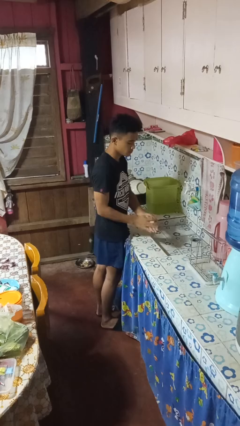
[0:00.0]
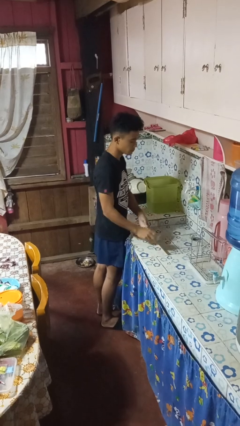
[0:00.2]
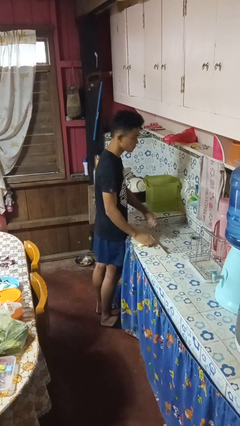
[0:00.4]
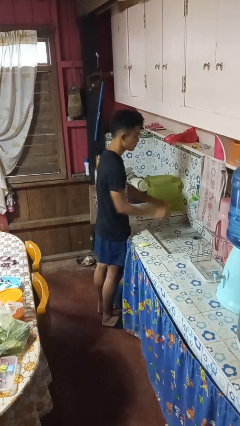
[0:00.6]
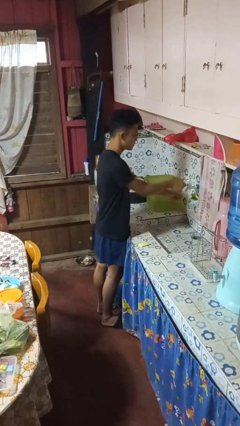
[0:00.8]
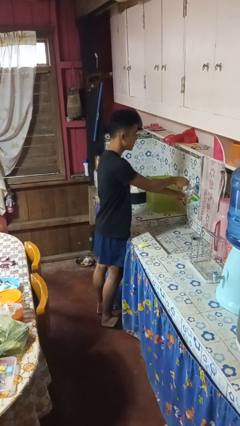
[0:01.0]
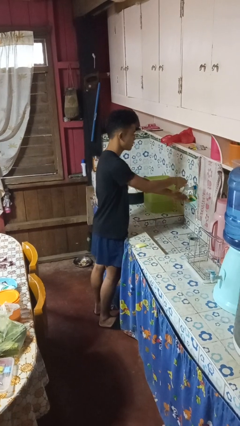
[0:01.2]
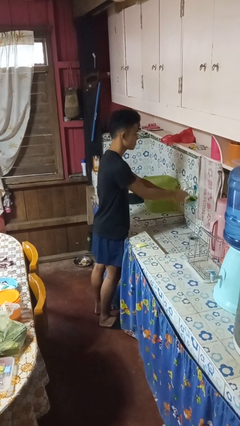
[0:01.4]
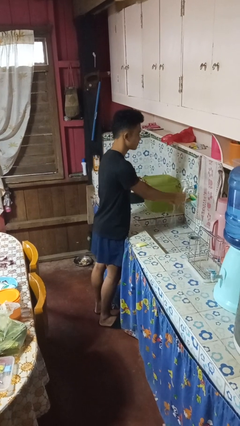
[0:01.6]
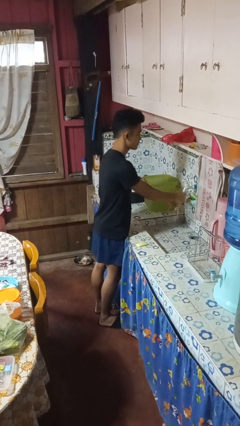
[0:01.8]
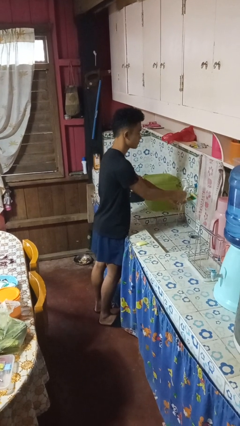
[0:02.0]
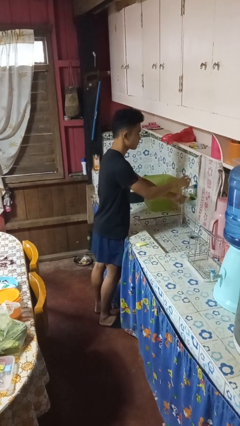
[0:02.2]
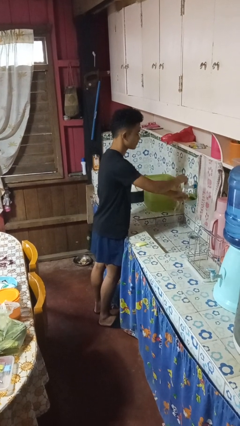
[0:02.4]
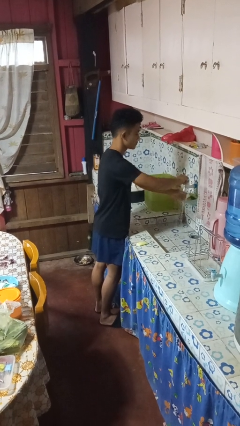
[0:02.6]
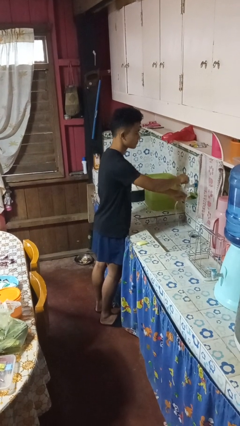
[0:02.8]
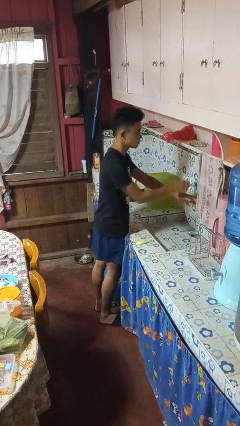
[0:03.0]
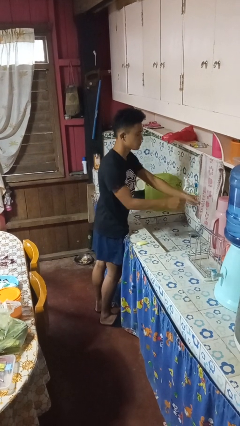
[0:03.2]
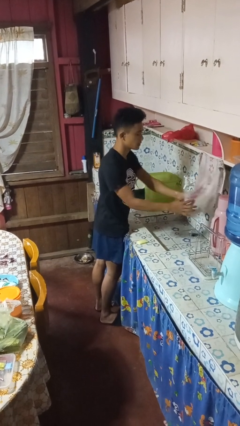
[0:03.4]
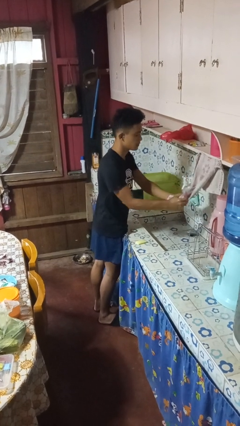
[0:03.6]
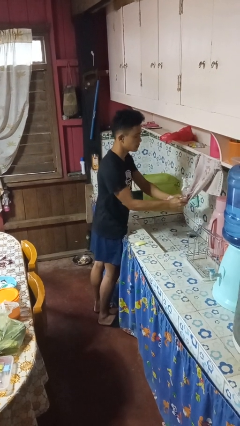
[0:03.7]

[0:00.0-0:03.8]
person washes hands

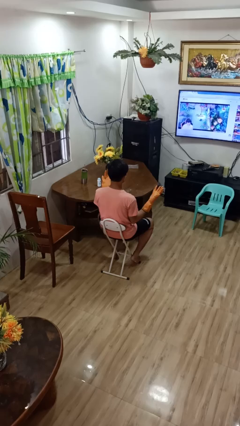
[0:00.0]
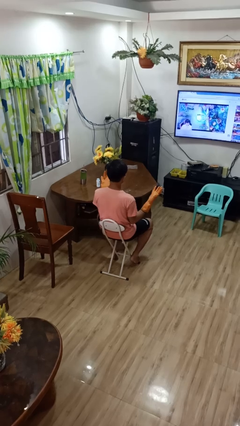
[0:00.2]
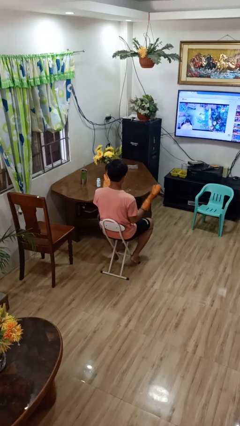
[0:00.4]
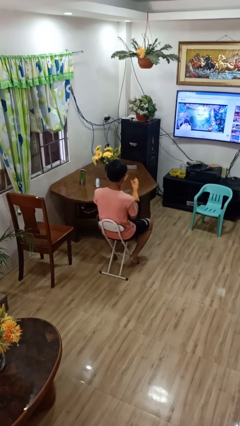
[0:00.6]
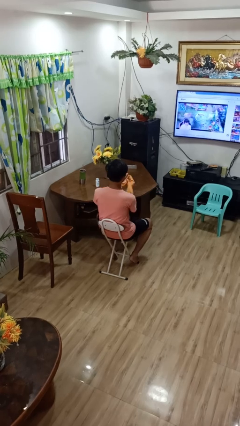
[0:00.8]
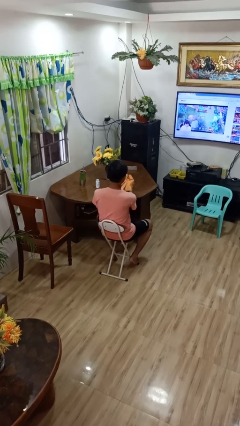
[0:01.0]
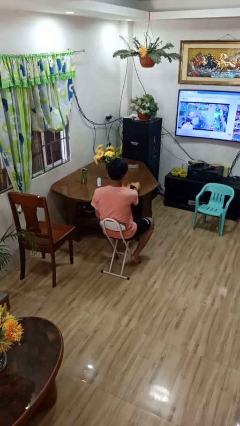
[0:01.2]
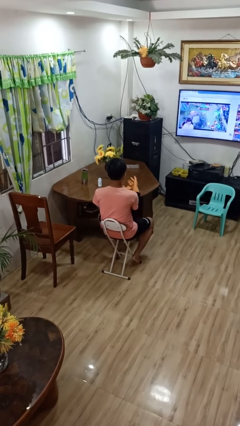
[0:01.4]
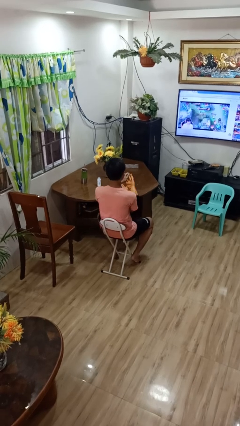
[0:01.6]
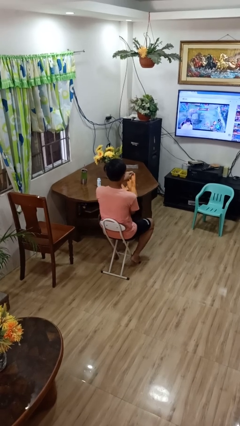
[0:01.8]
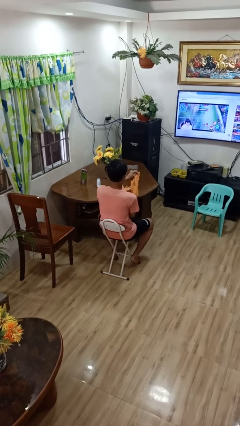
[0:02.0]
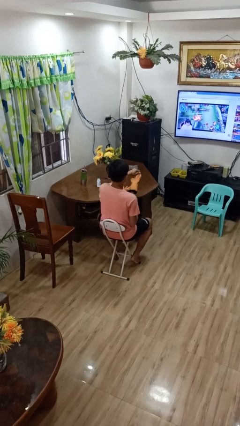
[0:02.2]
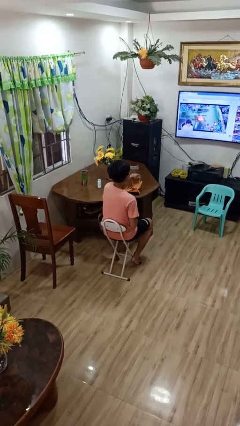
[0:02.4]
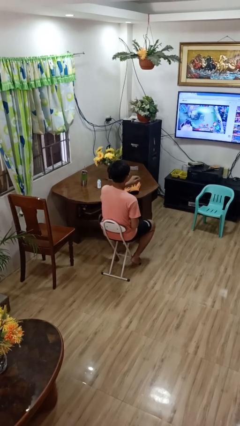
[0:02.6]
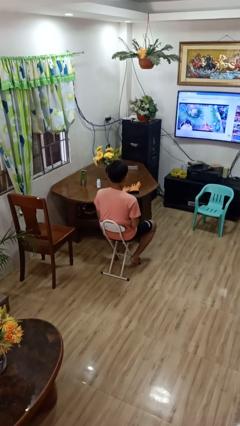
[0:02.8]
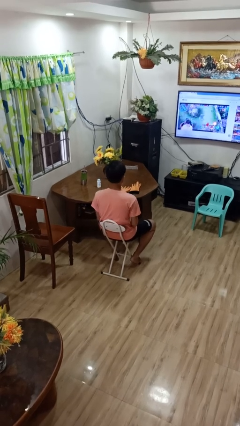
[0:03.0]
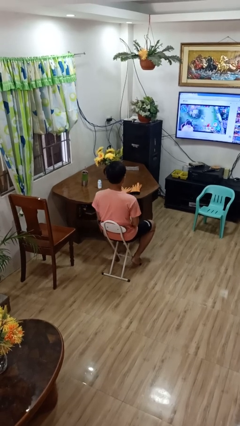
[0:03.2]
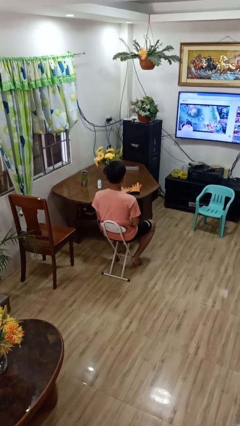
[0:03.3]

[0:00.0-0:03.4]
person takes off gloves

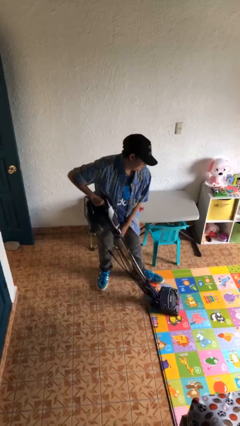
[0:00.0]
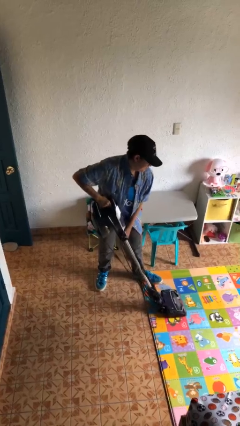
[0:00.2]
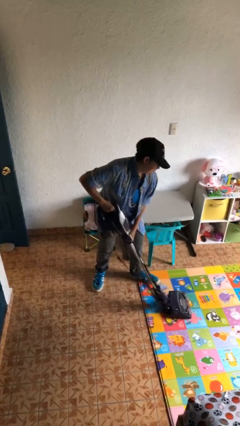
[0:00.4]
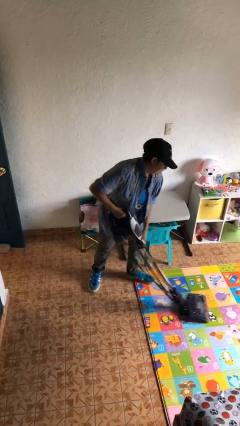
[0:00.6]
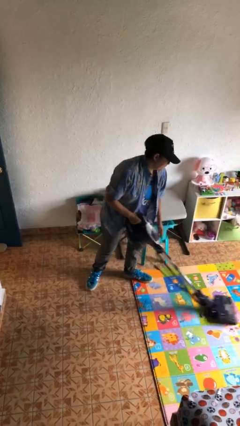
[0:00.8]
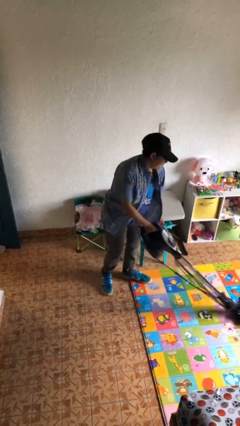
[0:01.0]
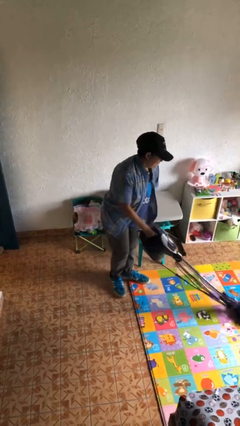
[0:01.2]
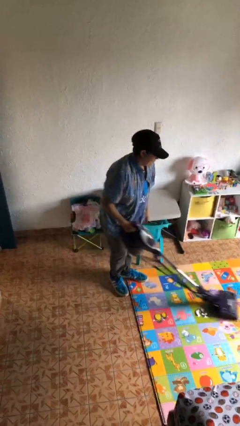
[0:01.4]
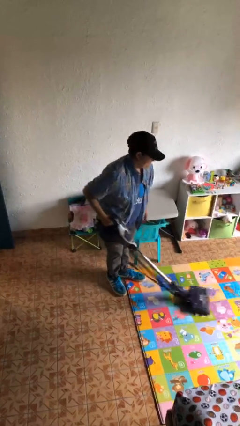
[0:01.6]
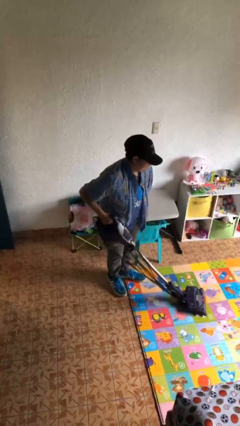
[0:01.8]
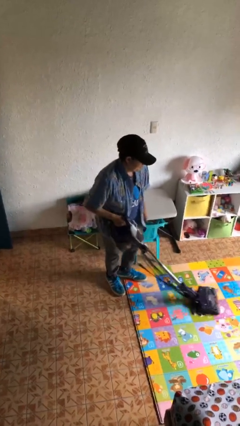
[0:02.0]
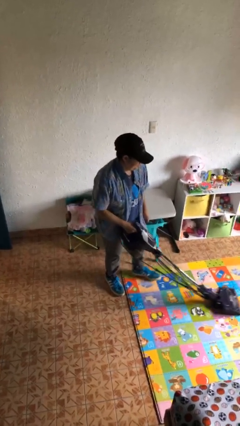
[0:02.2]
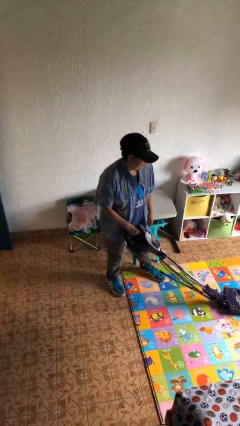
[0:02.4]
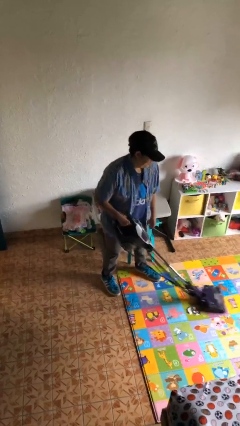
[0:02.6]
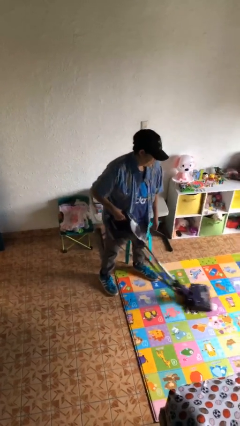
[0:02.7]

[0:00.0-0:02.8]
person vacuums carpet

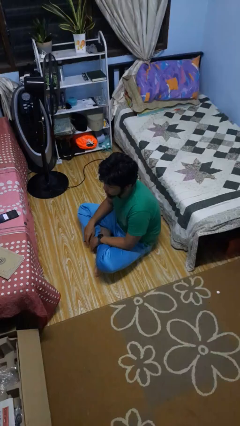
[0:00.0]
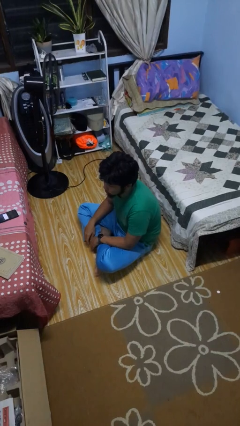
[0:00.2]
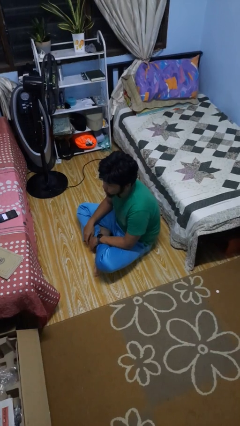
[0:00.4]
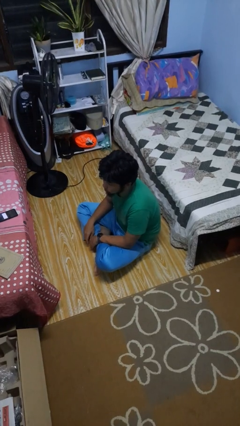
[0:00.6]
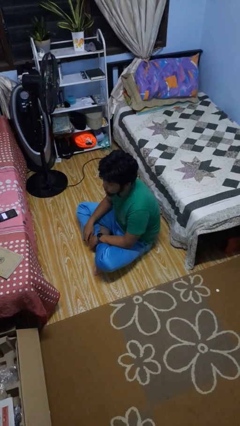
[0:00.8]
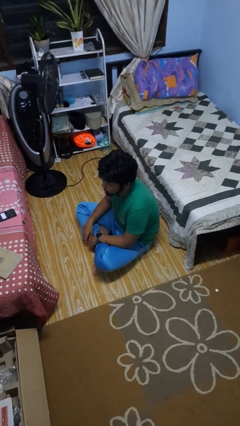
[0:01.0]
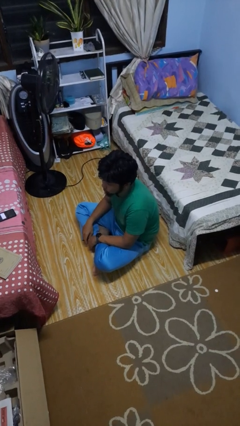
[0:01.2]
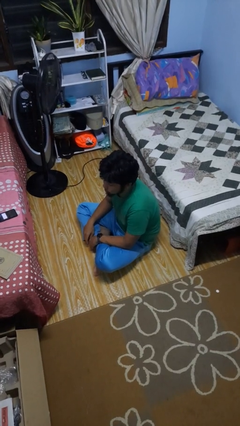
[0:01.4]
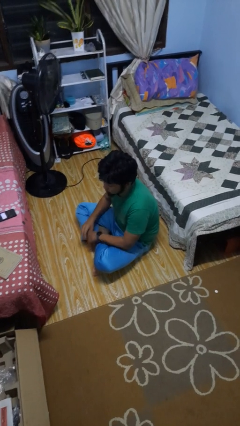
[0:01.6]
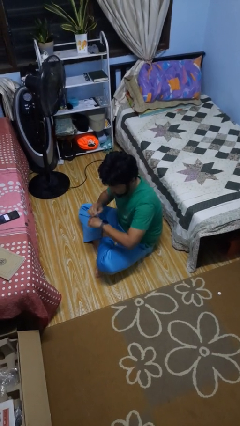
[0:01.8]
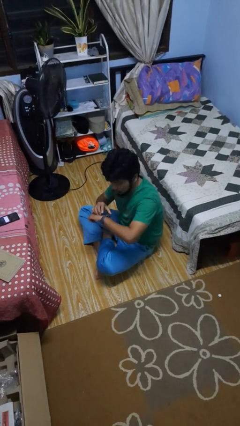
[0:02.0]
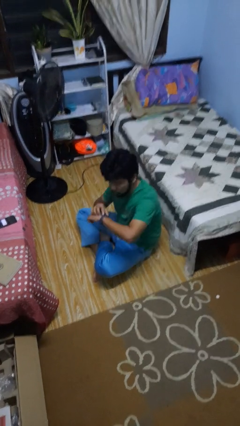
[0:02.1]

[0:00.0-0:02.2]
person looks at wristwatch

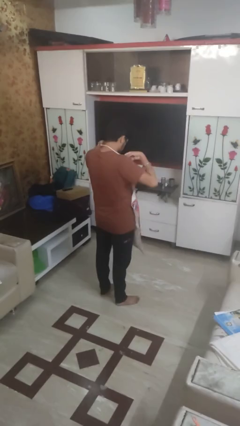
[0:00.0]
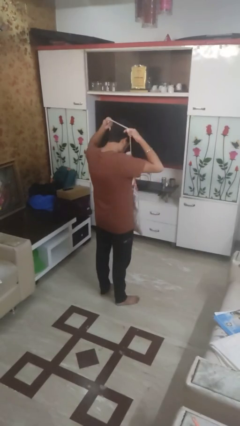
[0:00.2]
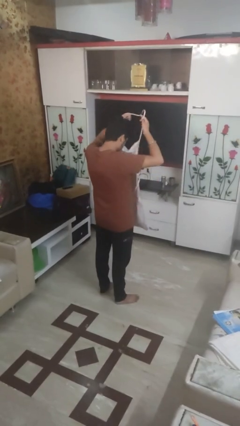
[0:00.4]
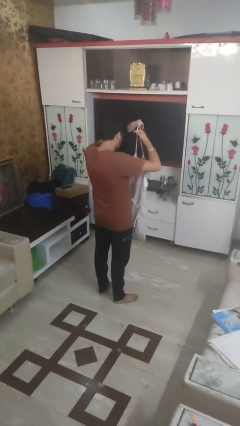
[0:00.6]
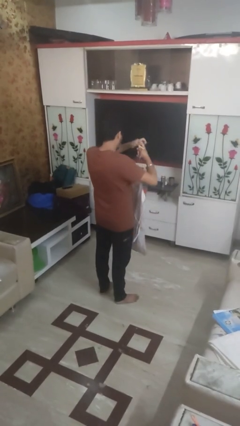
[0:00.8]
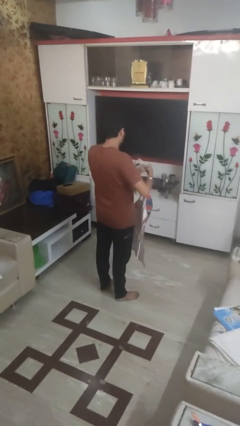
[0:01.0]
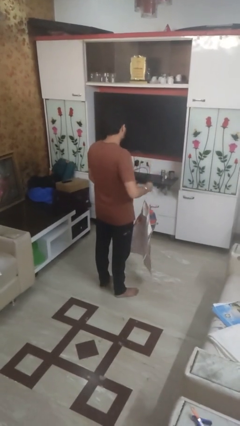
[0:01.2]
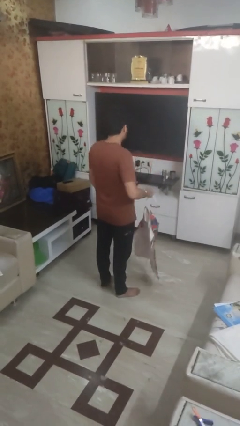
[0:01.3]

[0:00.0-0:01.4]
person takes off apron

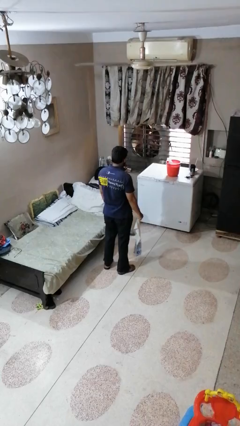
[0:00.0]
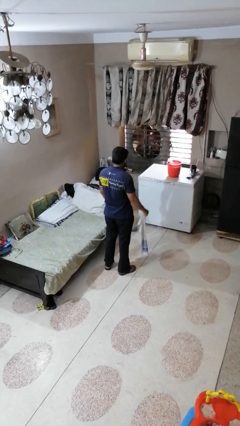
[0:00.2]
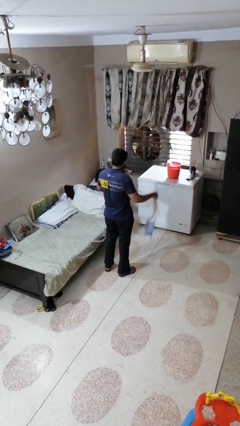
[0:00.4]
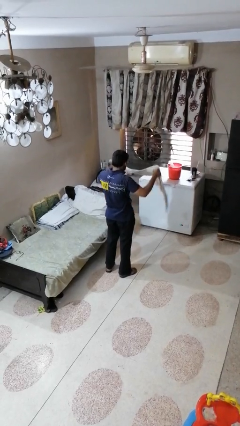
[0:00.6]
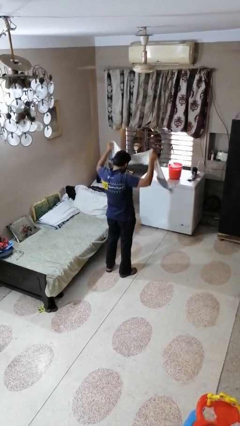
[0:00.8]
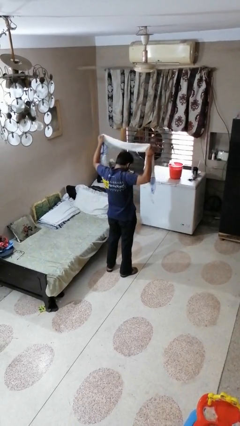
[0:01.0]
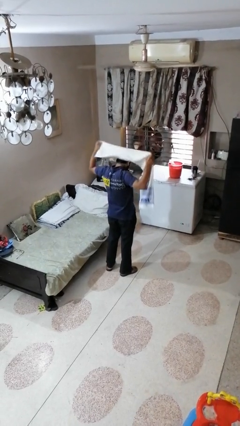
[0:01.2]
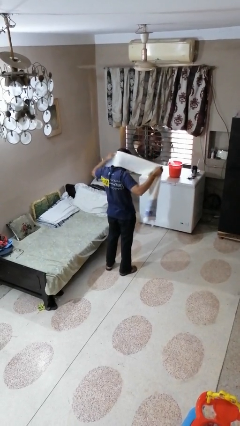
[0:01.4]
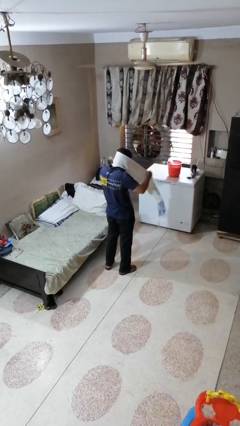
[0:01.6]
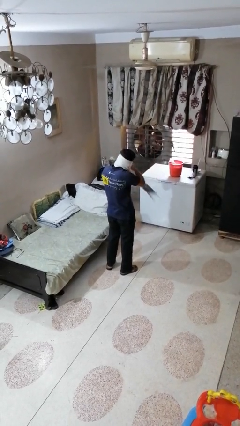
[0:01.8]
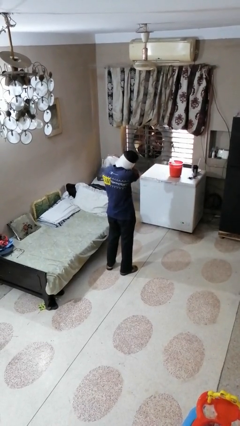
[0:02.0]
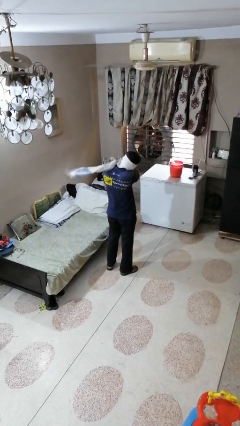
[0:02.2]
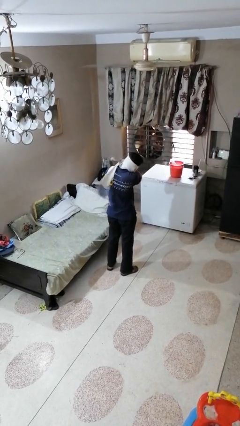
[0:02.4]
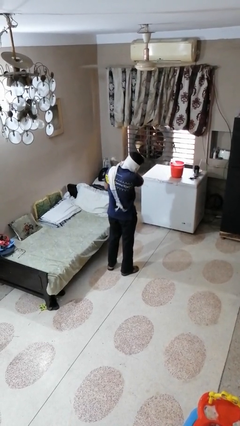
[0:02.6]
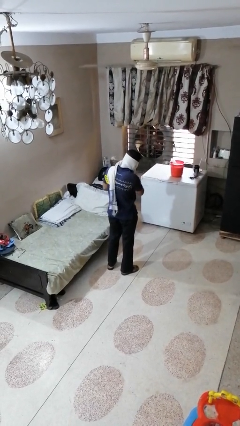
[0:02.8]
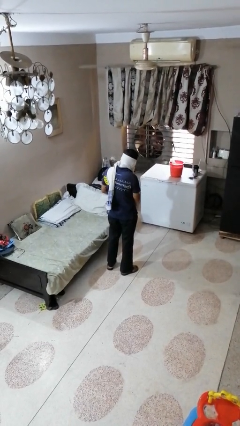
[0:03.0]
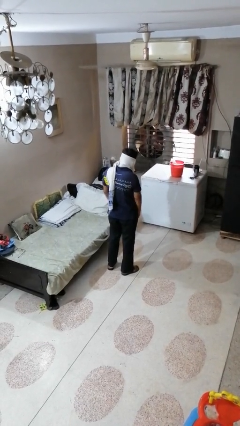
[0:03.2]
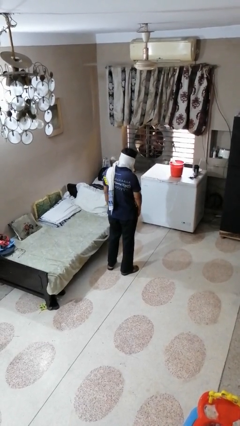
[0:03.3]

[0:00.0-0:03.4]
person puts on scarf

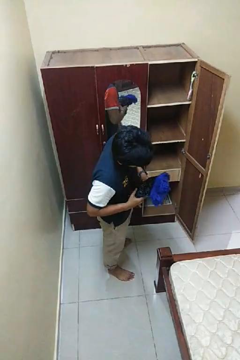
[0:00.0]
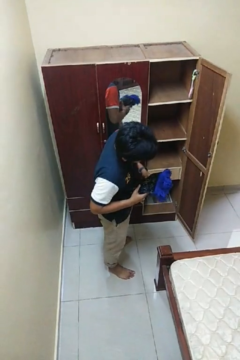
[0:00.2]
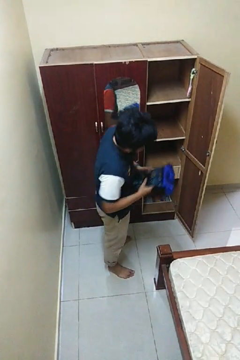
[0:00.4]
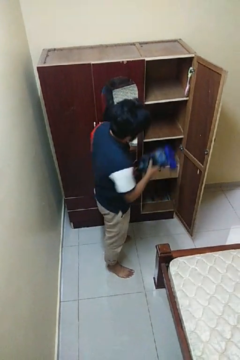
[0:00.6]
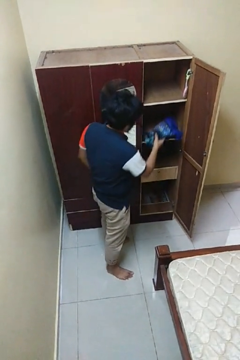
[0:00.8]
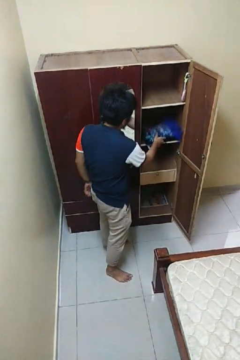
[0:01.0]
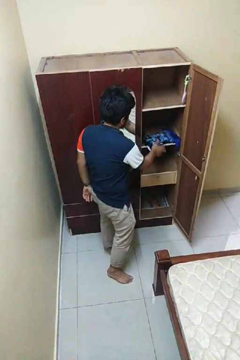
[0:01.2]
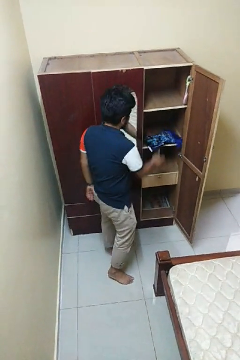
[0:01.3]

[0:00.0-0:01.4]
person puts down object into cabinet
